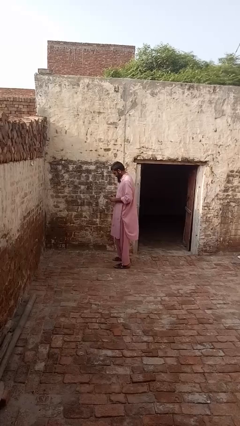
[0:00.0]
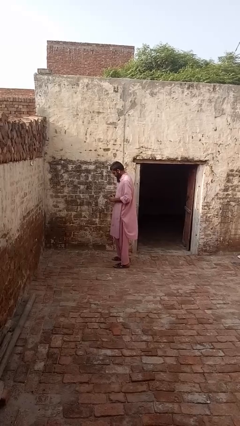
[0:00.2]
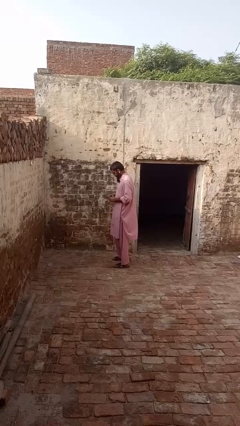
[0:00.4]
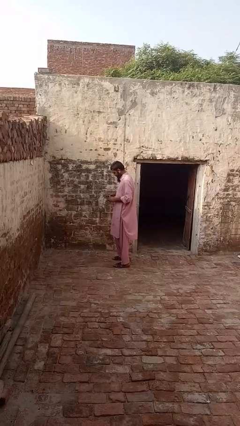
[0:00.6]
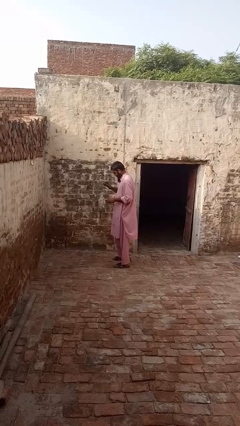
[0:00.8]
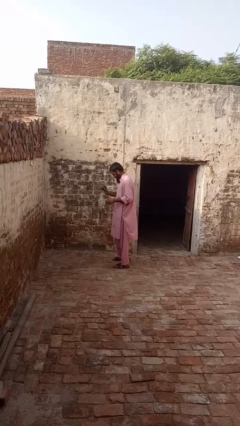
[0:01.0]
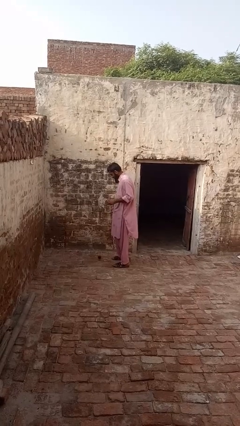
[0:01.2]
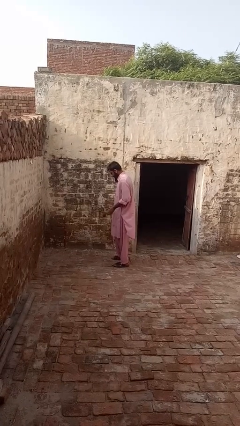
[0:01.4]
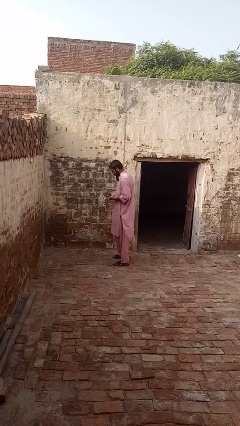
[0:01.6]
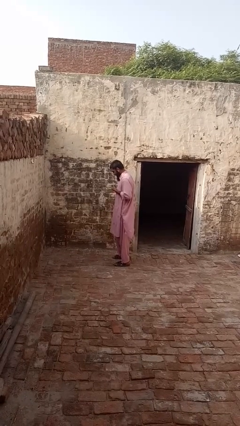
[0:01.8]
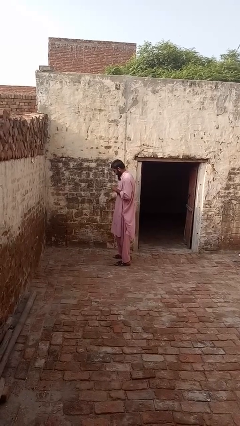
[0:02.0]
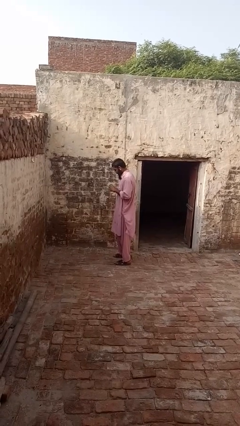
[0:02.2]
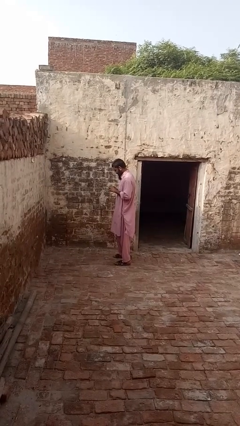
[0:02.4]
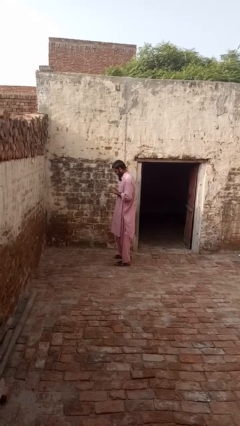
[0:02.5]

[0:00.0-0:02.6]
person bounces ball on floor

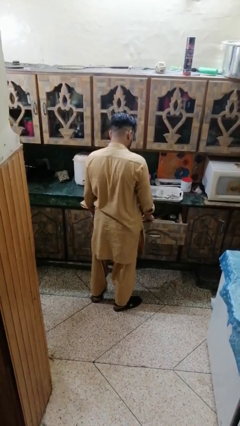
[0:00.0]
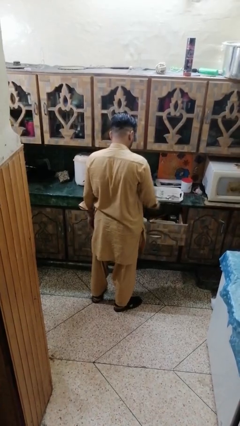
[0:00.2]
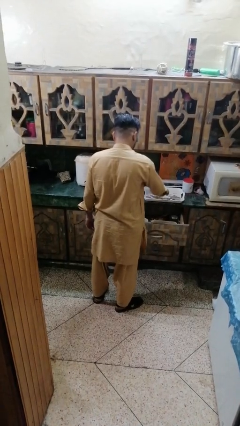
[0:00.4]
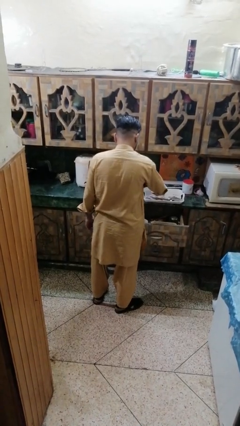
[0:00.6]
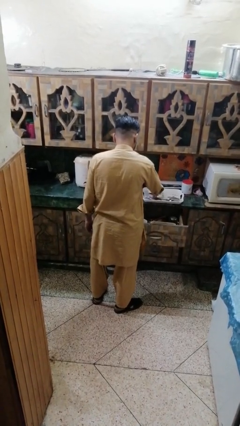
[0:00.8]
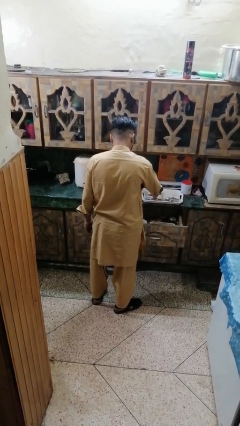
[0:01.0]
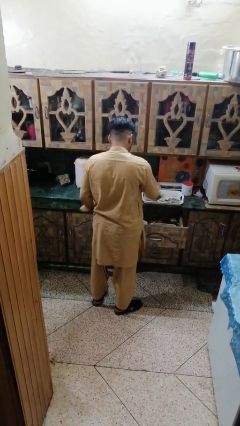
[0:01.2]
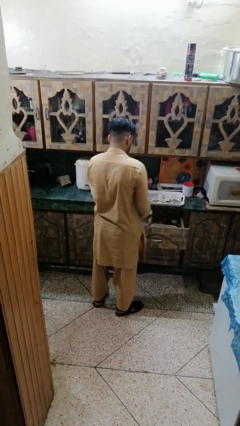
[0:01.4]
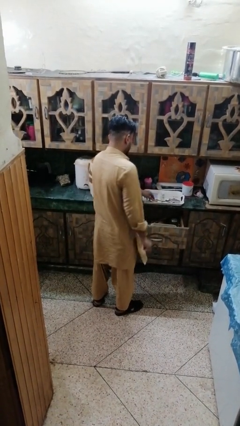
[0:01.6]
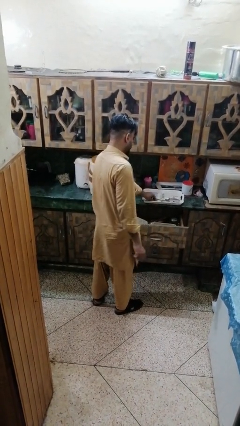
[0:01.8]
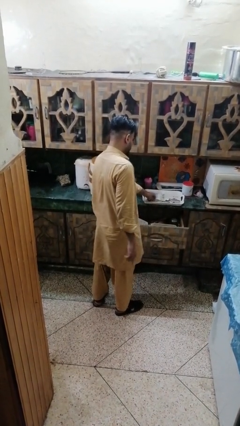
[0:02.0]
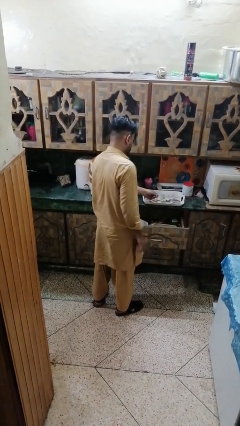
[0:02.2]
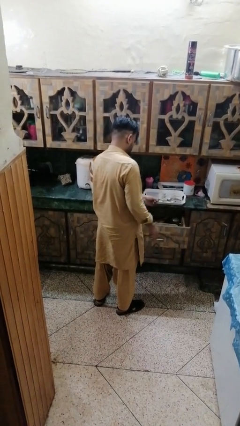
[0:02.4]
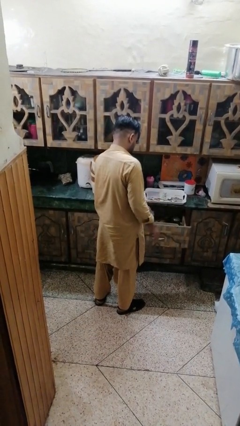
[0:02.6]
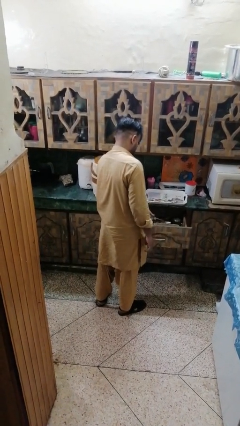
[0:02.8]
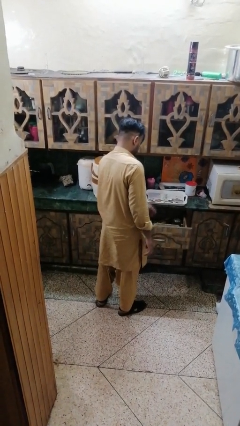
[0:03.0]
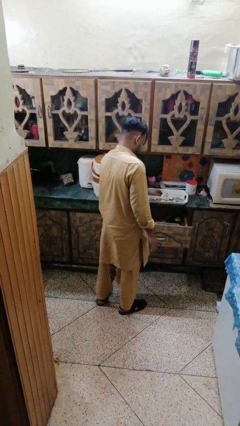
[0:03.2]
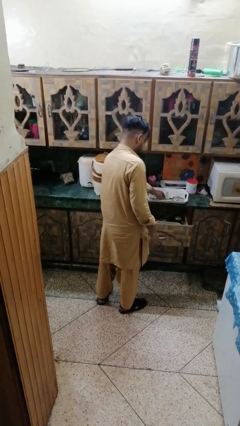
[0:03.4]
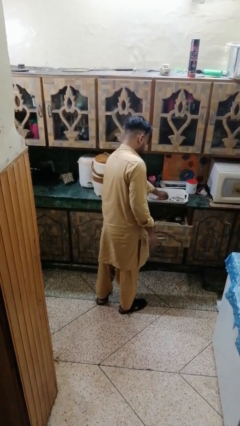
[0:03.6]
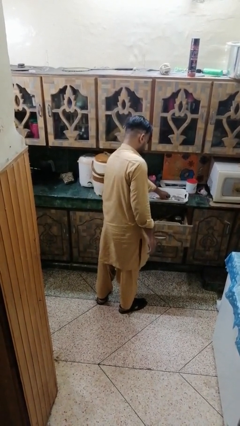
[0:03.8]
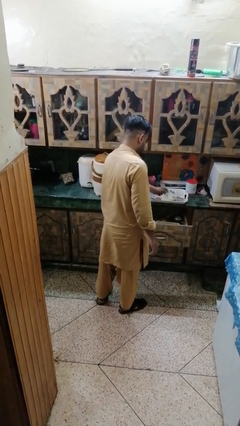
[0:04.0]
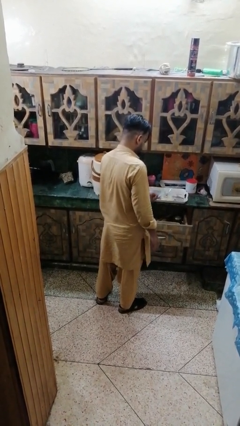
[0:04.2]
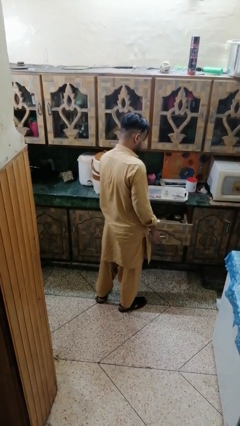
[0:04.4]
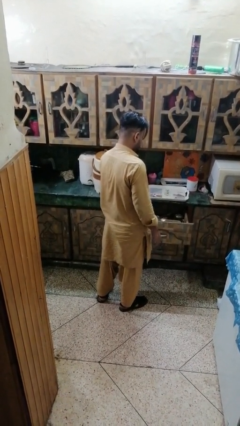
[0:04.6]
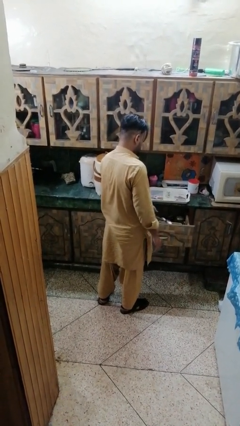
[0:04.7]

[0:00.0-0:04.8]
person puts object into kitchen drawer

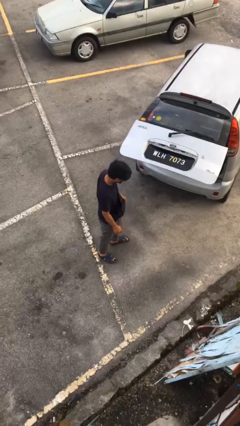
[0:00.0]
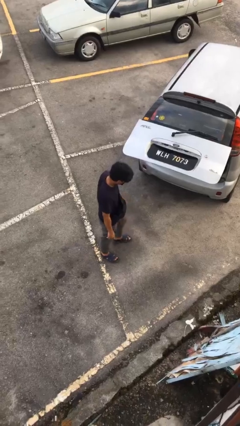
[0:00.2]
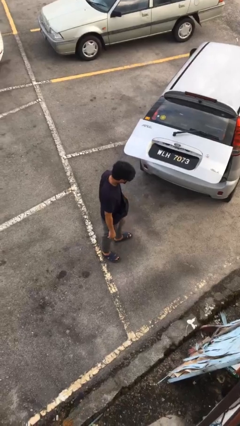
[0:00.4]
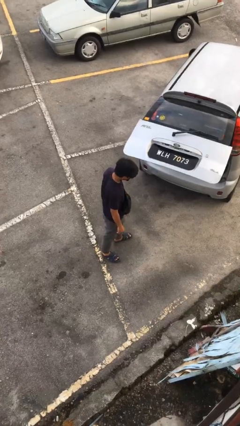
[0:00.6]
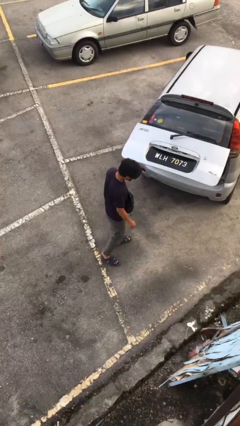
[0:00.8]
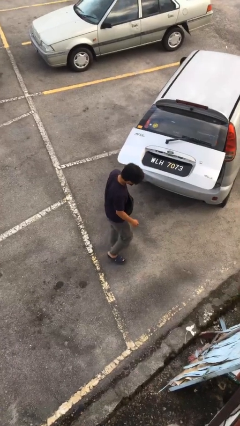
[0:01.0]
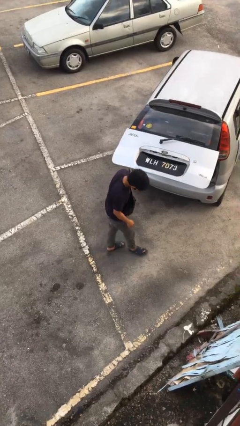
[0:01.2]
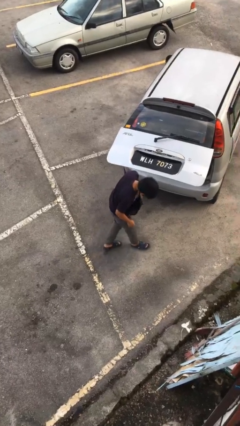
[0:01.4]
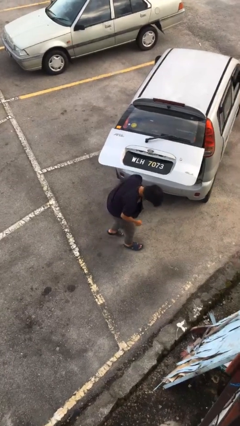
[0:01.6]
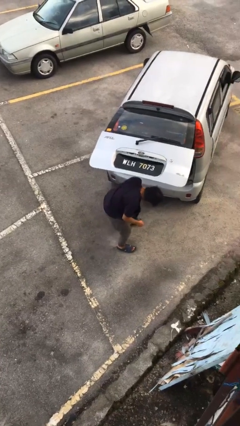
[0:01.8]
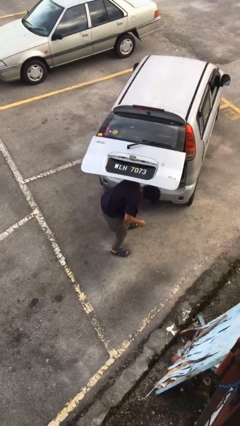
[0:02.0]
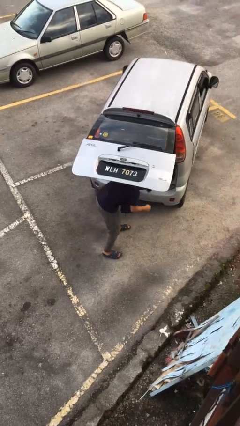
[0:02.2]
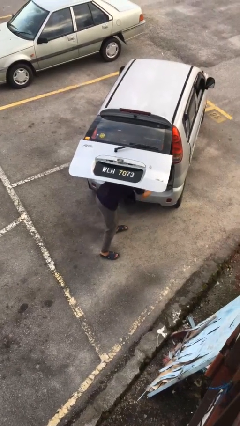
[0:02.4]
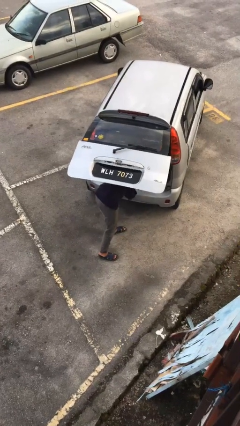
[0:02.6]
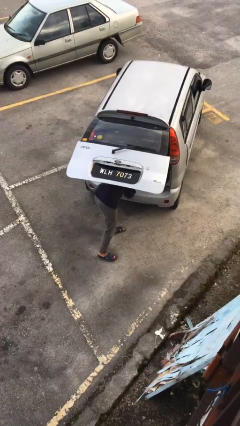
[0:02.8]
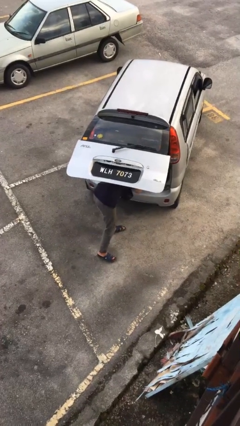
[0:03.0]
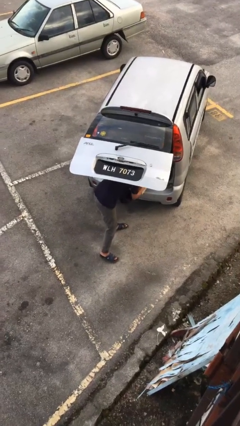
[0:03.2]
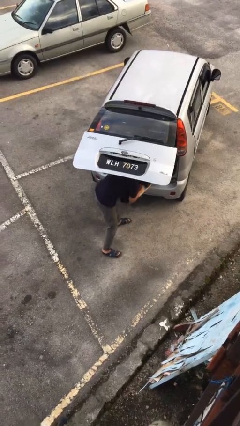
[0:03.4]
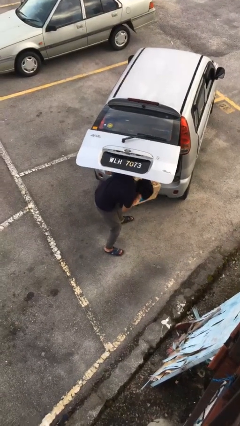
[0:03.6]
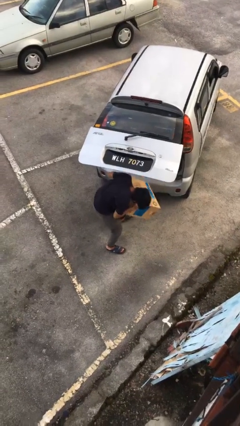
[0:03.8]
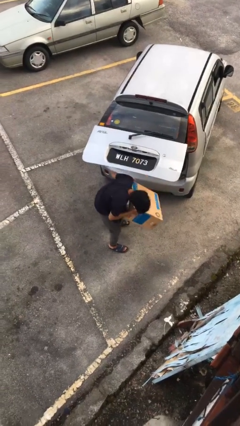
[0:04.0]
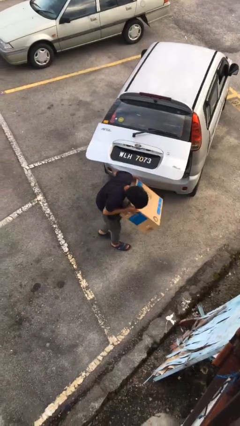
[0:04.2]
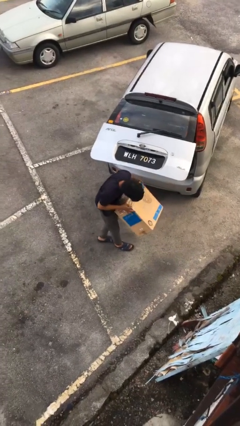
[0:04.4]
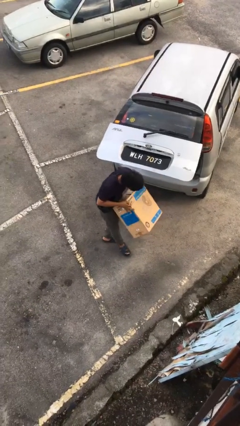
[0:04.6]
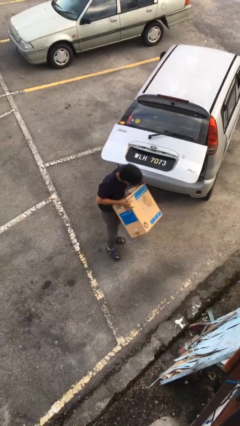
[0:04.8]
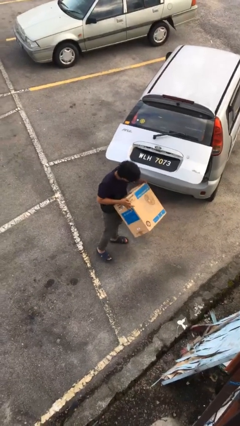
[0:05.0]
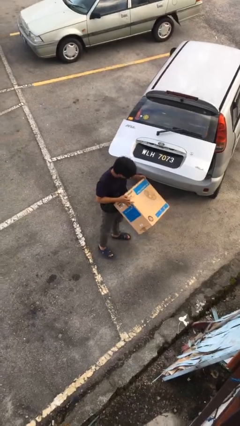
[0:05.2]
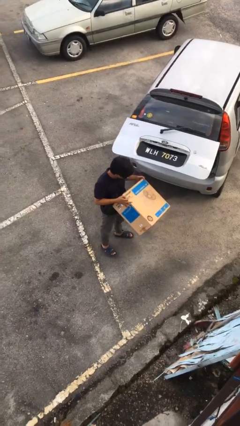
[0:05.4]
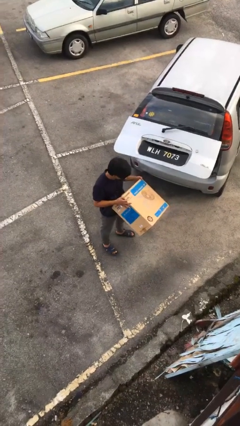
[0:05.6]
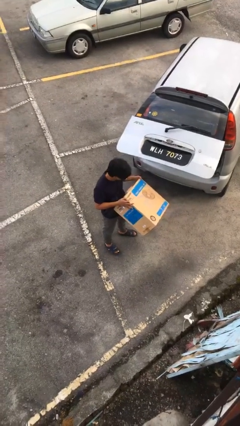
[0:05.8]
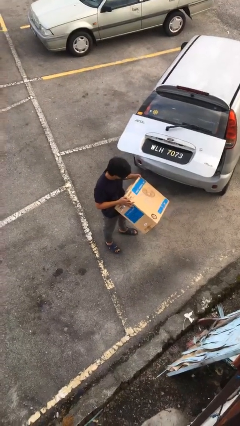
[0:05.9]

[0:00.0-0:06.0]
person unloads car

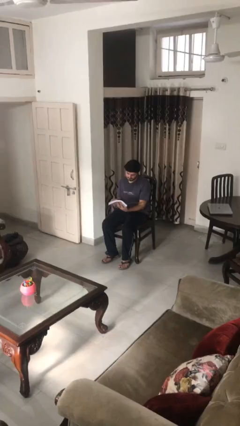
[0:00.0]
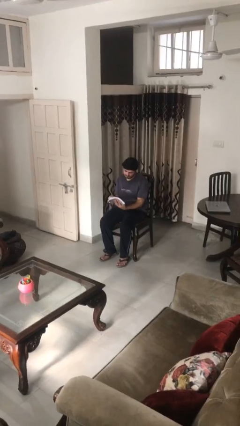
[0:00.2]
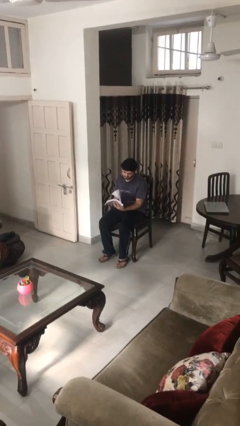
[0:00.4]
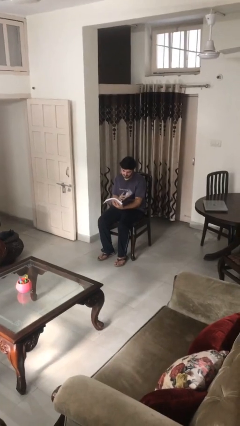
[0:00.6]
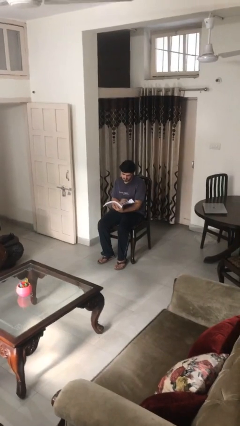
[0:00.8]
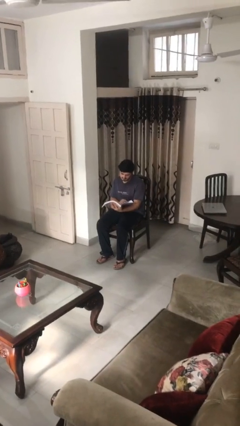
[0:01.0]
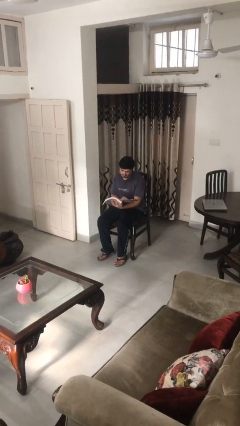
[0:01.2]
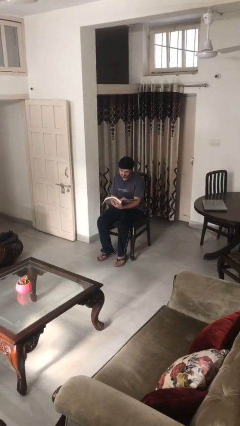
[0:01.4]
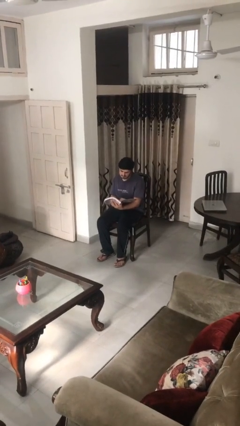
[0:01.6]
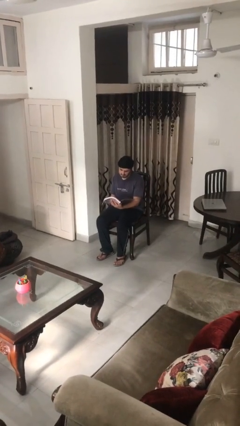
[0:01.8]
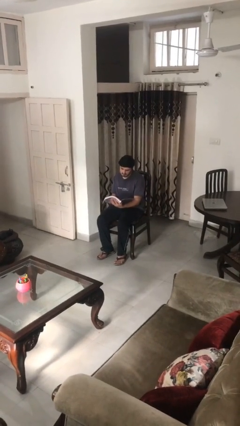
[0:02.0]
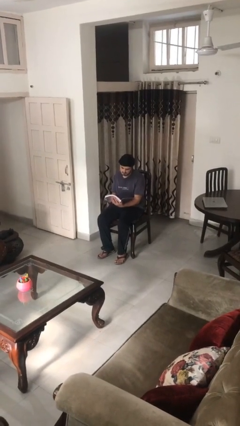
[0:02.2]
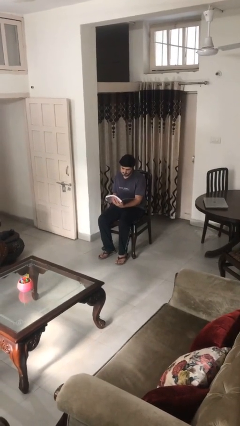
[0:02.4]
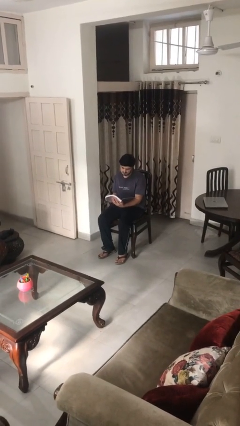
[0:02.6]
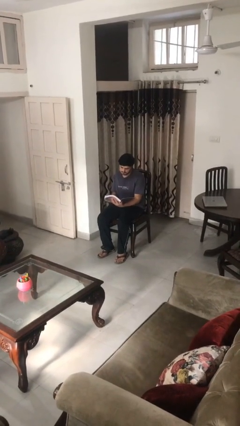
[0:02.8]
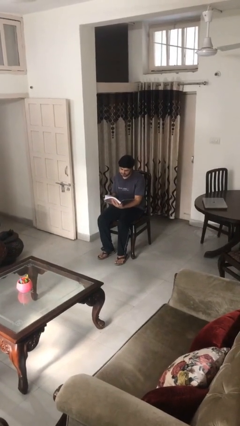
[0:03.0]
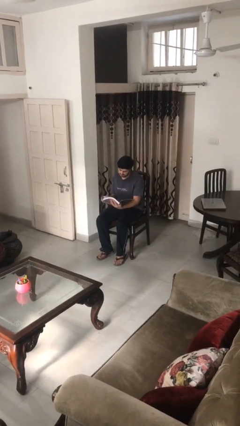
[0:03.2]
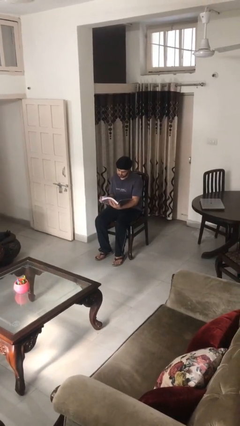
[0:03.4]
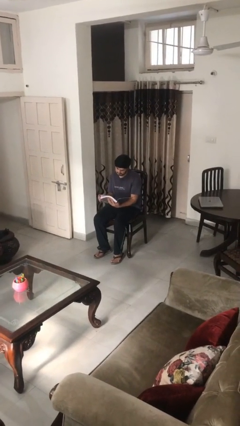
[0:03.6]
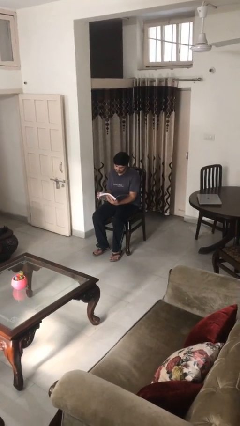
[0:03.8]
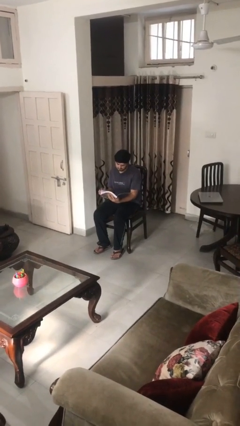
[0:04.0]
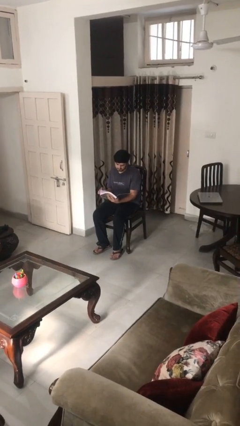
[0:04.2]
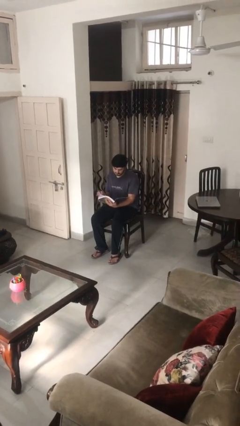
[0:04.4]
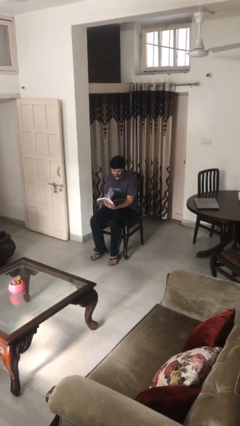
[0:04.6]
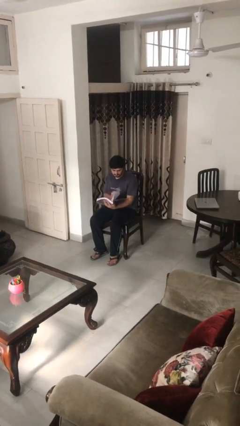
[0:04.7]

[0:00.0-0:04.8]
person reads document
